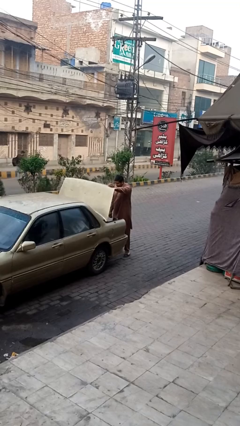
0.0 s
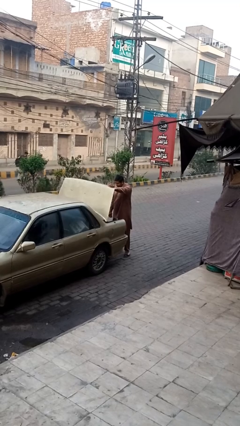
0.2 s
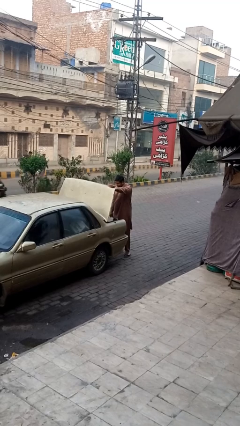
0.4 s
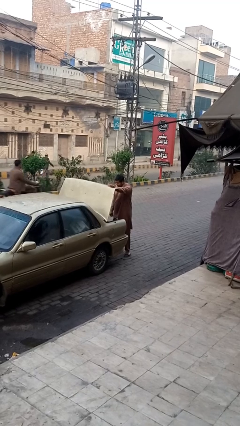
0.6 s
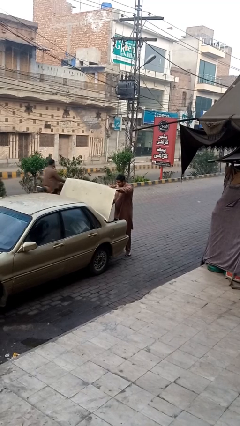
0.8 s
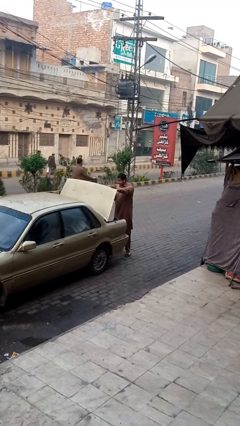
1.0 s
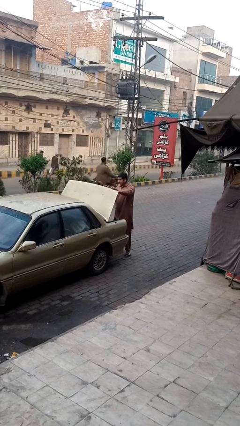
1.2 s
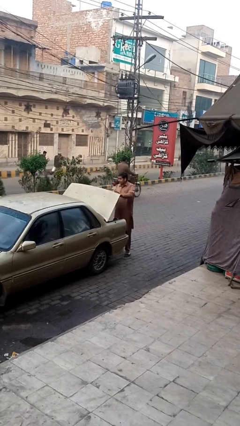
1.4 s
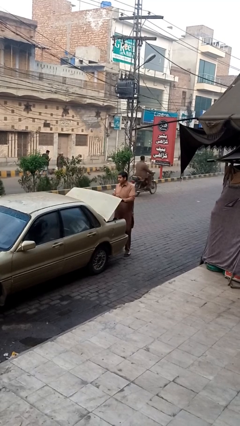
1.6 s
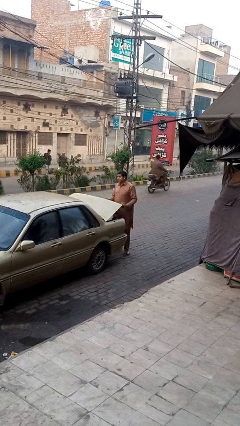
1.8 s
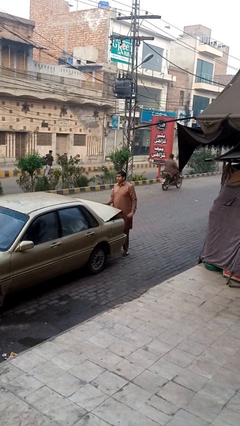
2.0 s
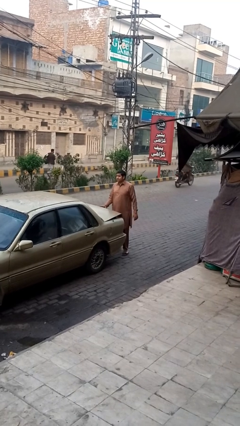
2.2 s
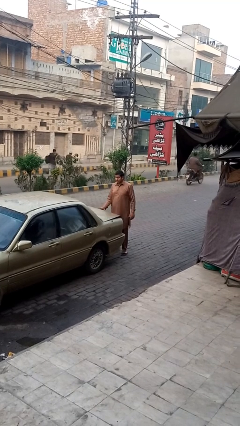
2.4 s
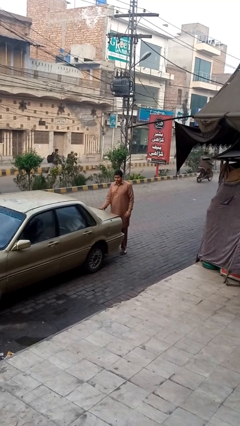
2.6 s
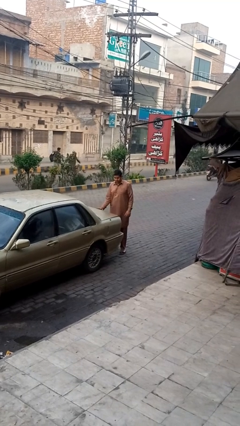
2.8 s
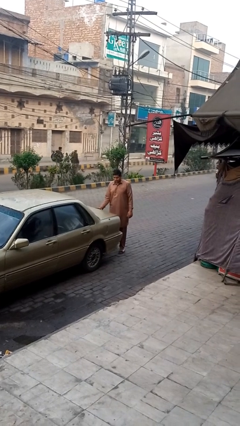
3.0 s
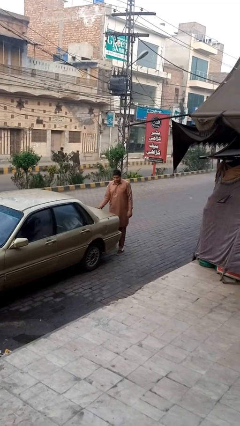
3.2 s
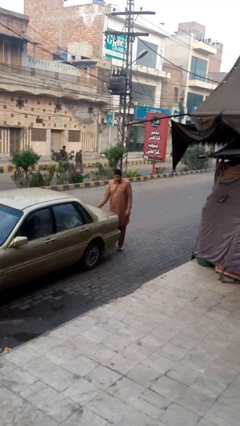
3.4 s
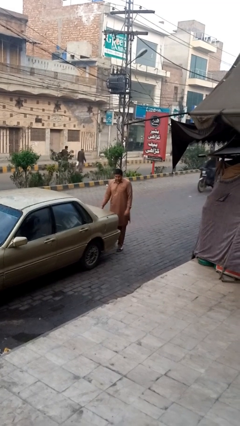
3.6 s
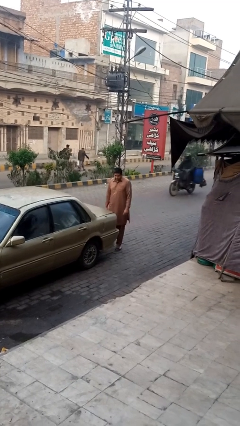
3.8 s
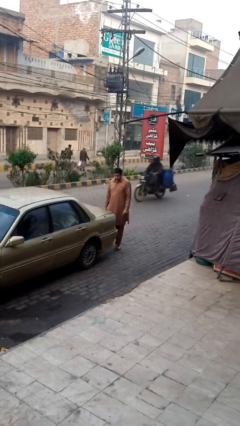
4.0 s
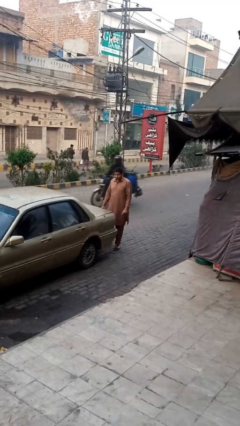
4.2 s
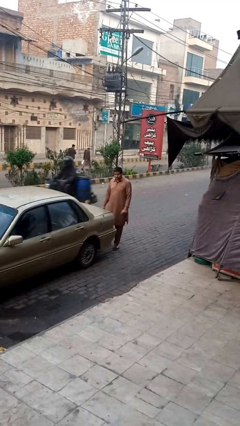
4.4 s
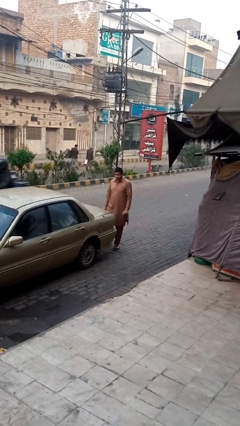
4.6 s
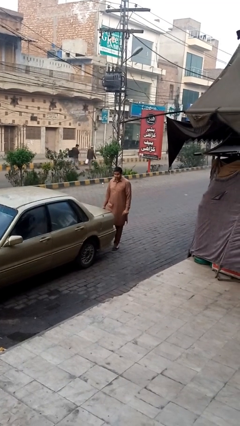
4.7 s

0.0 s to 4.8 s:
person closes car trunk

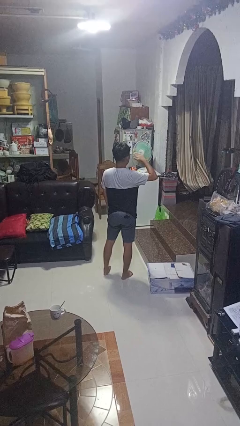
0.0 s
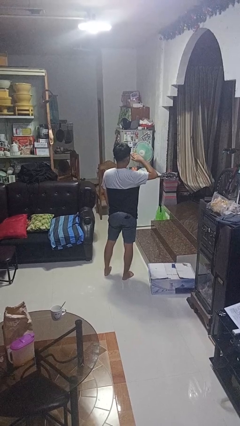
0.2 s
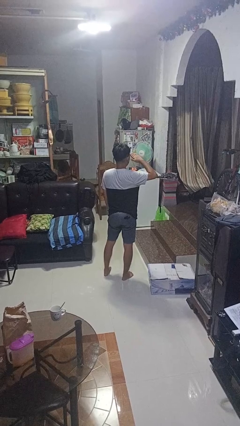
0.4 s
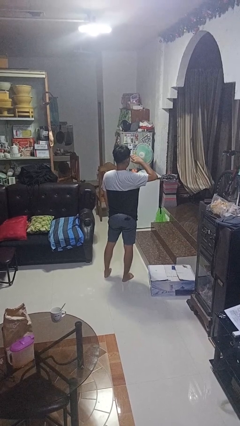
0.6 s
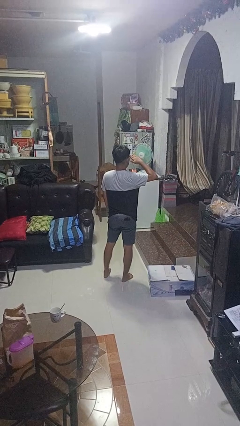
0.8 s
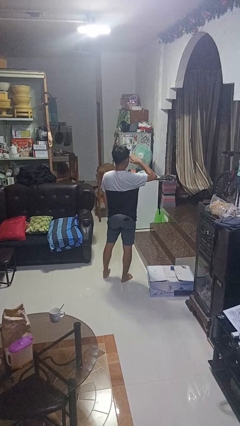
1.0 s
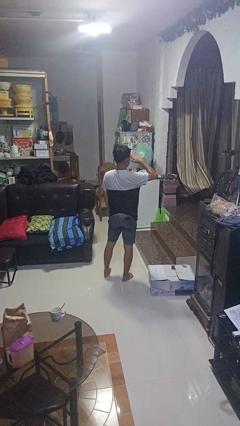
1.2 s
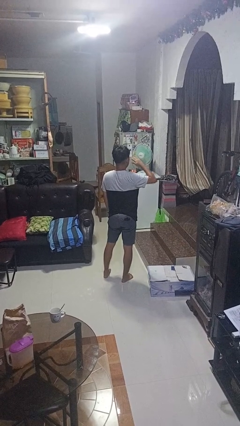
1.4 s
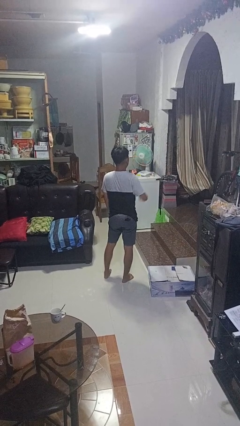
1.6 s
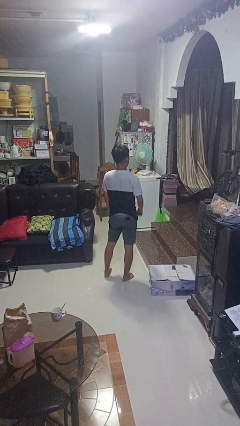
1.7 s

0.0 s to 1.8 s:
person salutes

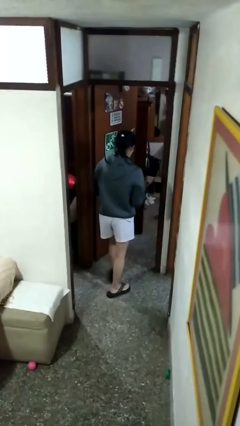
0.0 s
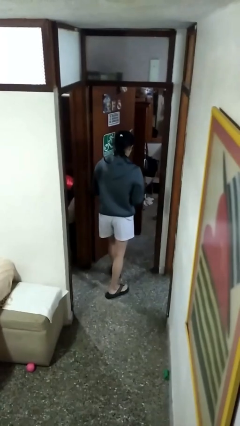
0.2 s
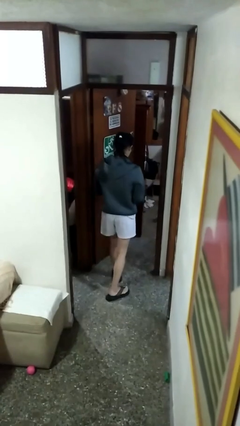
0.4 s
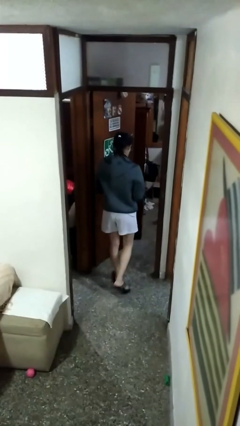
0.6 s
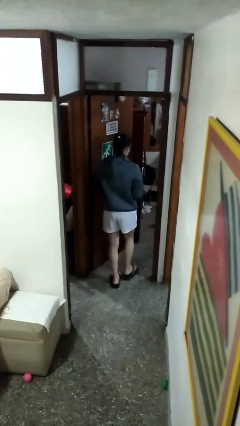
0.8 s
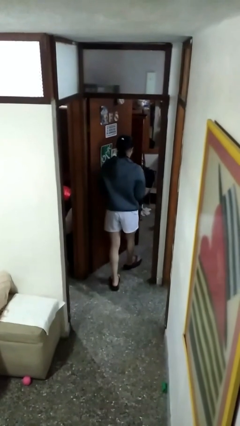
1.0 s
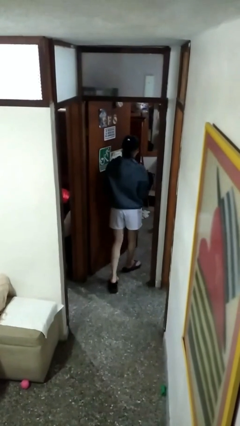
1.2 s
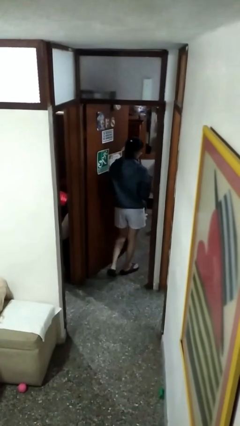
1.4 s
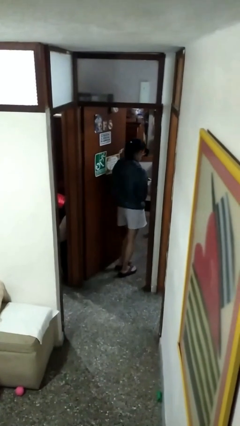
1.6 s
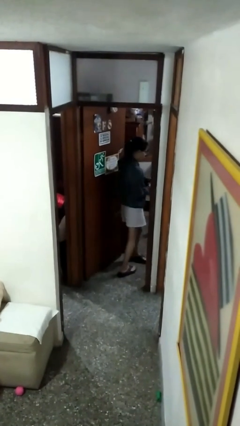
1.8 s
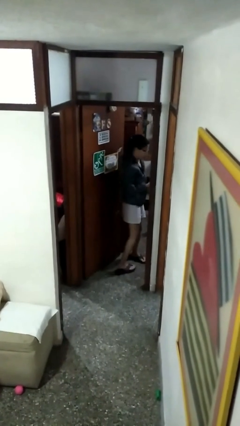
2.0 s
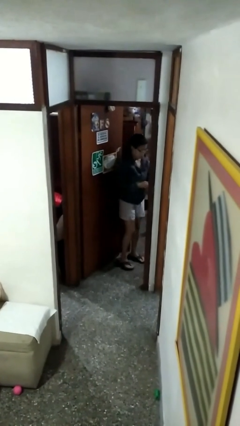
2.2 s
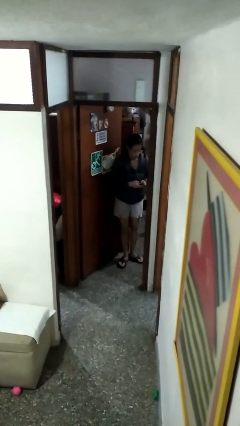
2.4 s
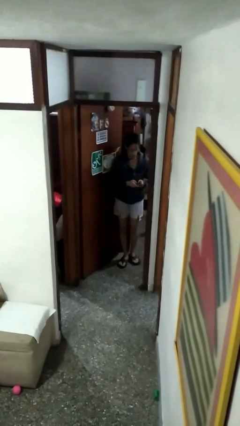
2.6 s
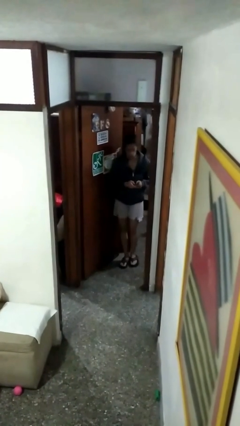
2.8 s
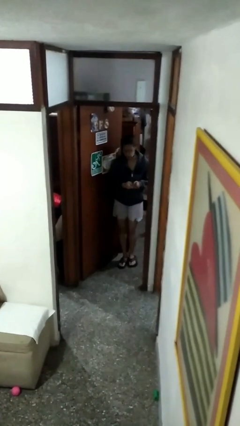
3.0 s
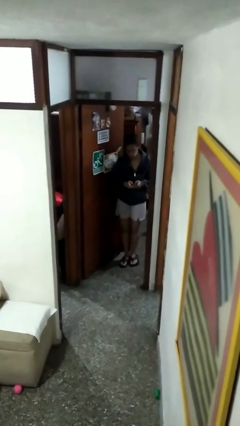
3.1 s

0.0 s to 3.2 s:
person exits scene through structure

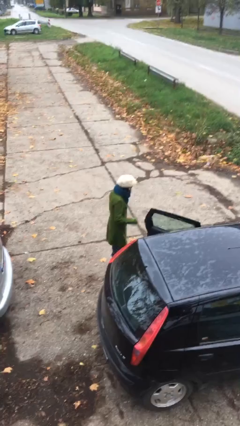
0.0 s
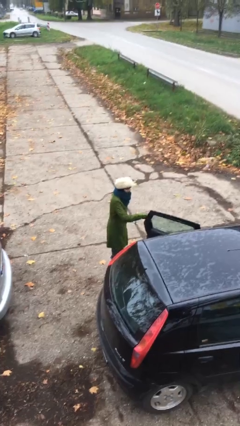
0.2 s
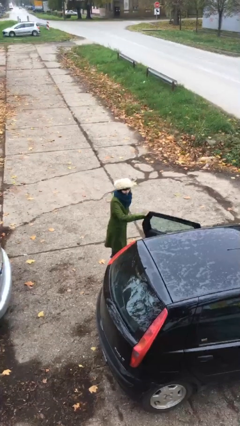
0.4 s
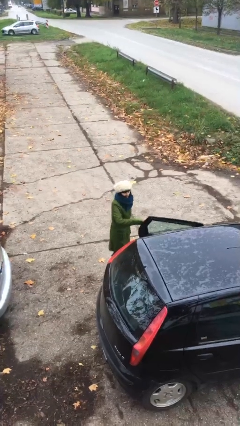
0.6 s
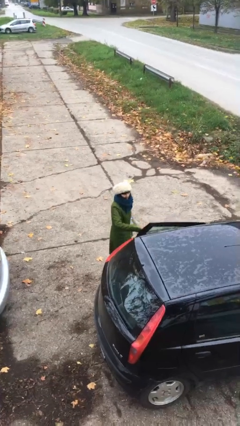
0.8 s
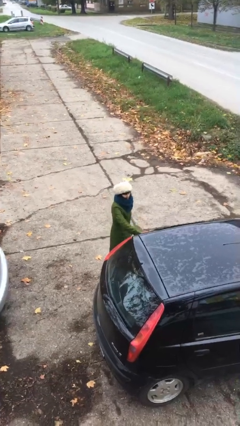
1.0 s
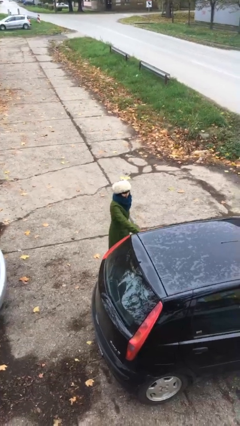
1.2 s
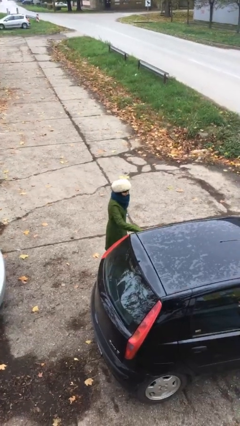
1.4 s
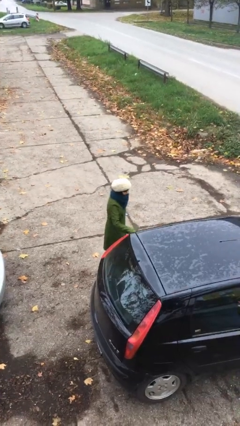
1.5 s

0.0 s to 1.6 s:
person closes car door

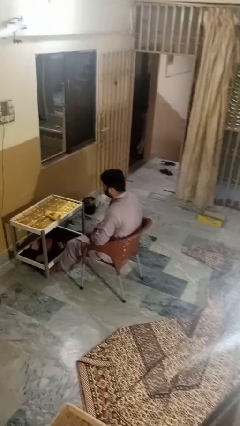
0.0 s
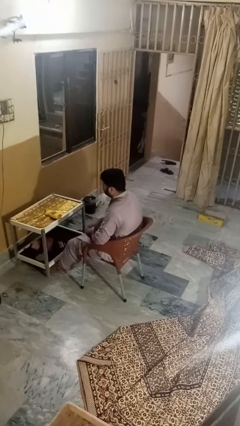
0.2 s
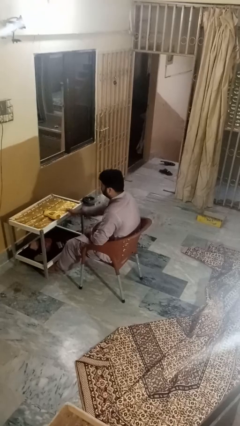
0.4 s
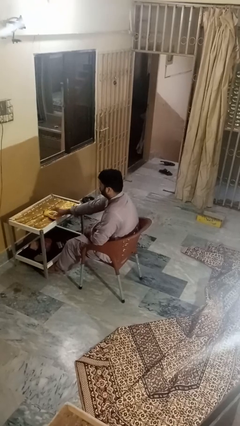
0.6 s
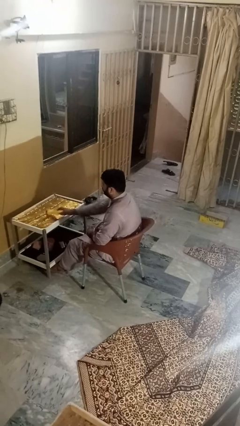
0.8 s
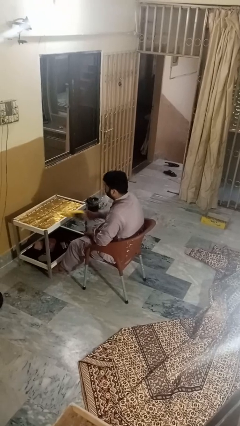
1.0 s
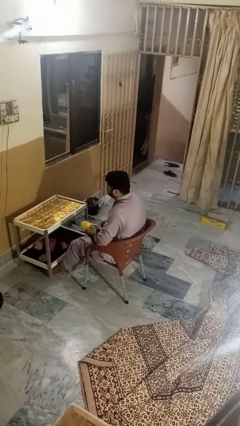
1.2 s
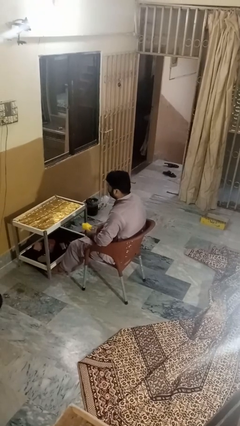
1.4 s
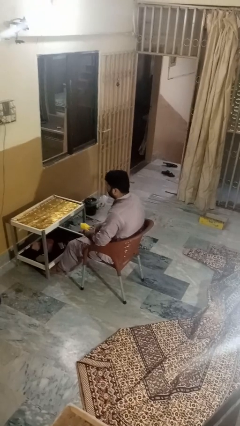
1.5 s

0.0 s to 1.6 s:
person picks up object from table

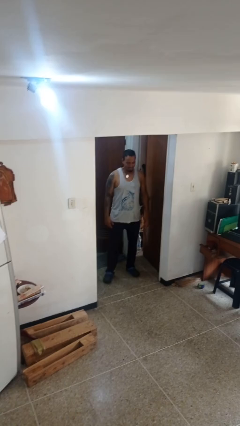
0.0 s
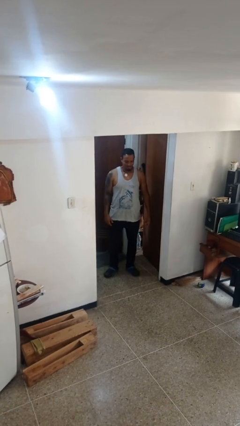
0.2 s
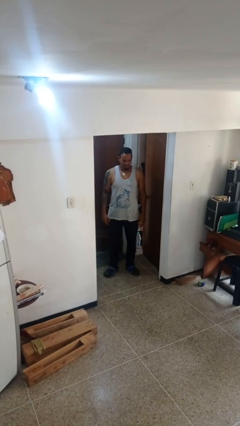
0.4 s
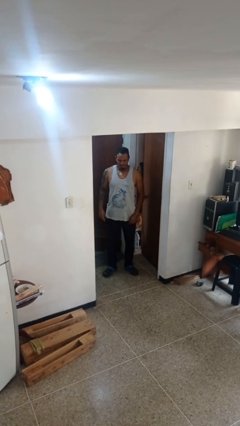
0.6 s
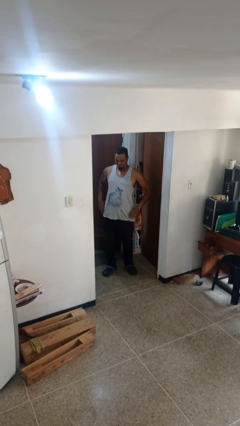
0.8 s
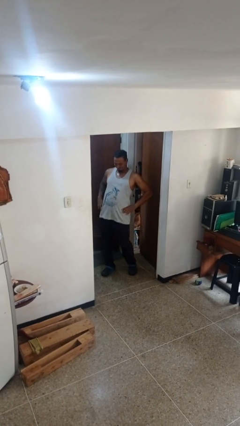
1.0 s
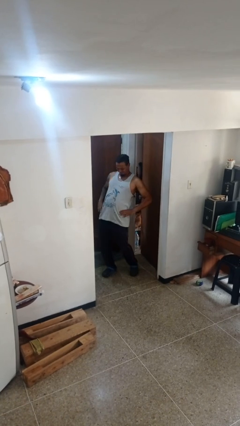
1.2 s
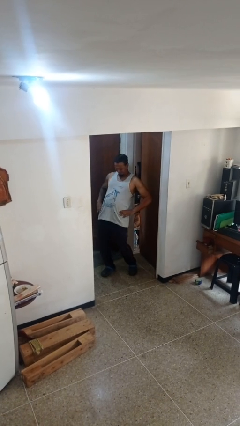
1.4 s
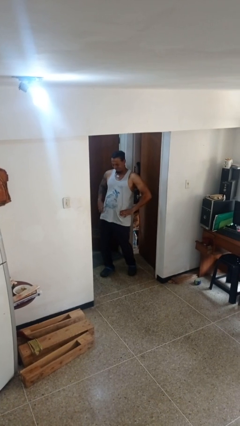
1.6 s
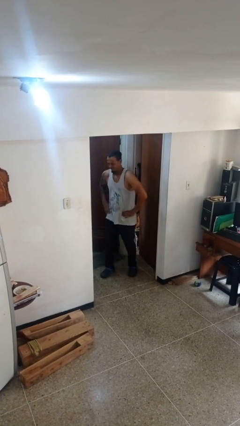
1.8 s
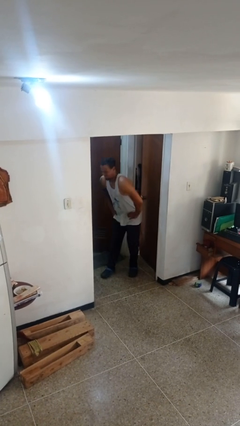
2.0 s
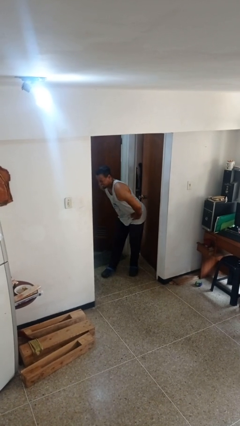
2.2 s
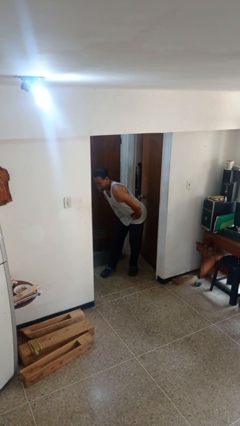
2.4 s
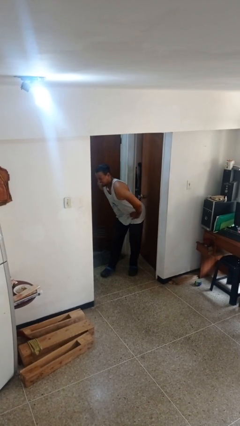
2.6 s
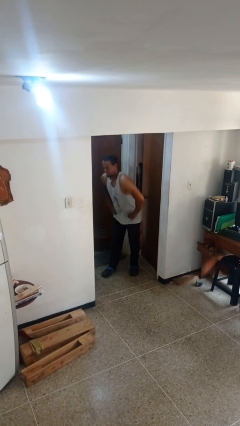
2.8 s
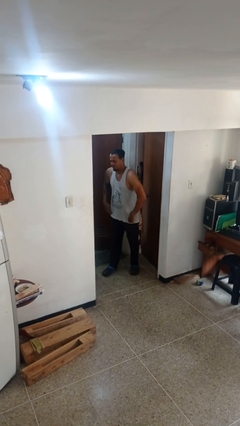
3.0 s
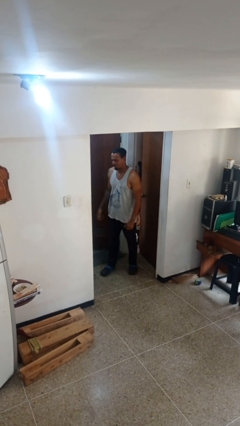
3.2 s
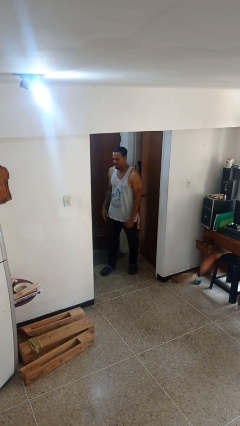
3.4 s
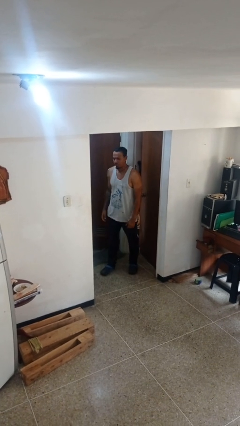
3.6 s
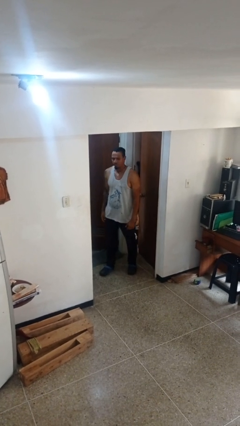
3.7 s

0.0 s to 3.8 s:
person wiggles hips

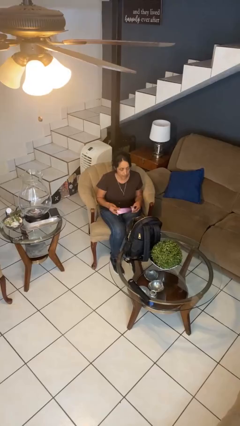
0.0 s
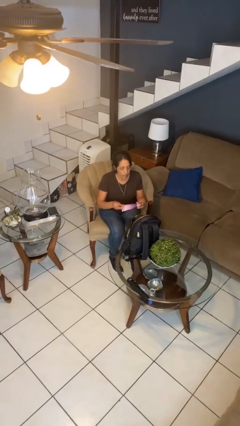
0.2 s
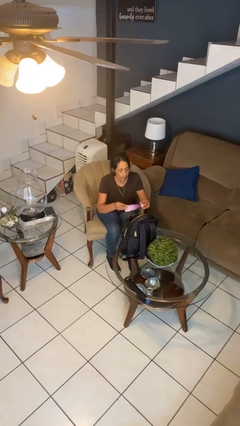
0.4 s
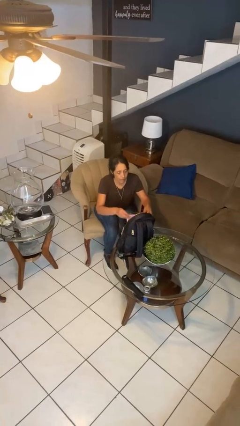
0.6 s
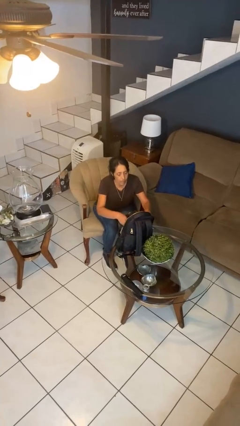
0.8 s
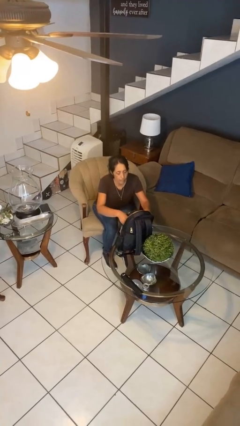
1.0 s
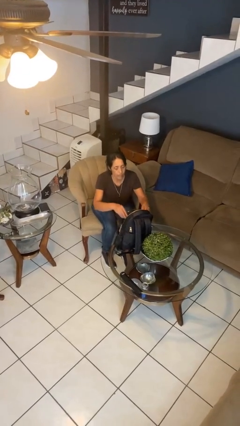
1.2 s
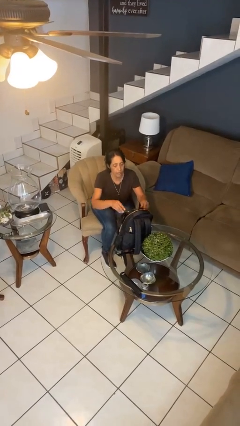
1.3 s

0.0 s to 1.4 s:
person puts object into backpack
